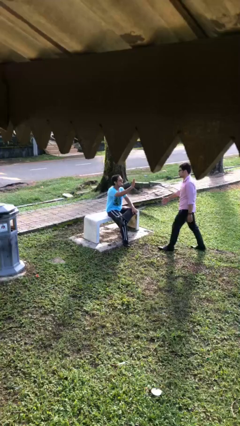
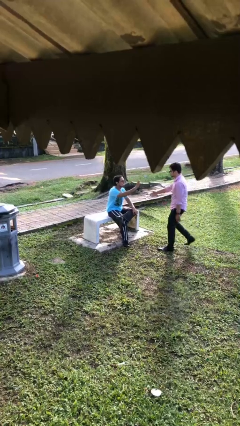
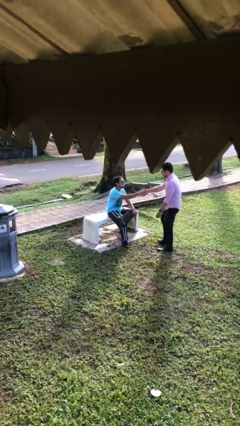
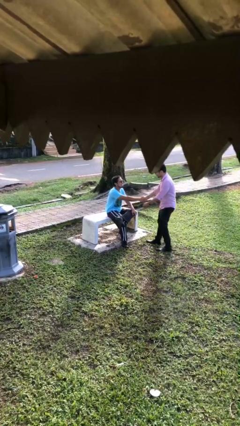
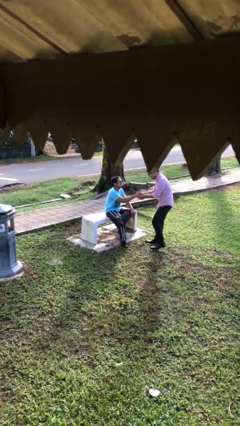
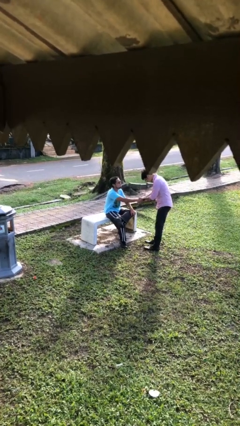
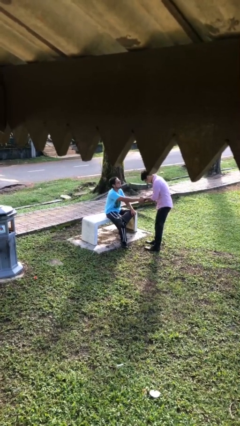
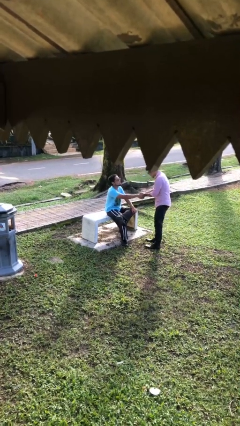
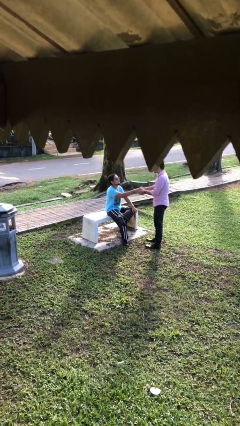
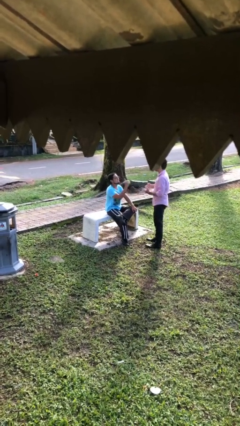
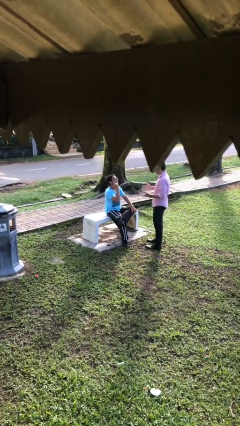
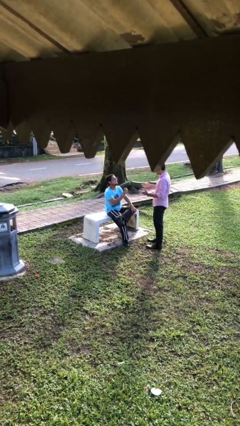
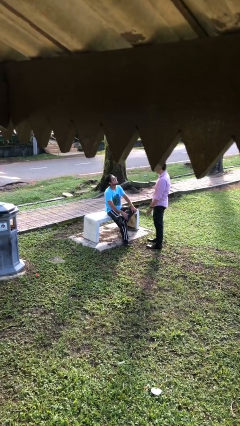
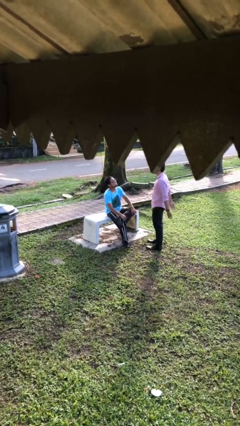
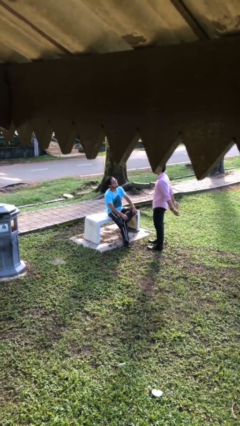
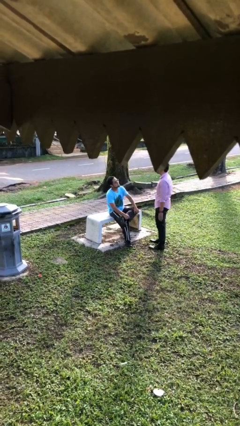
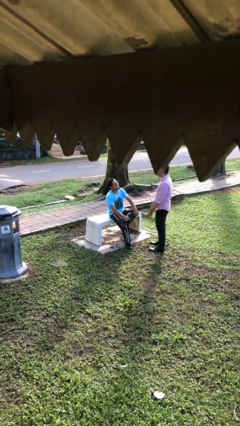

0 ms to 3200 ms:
person shakes hand

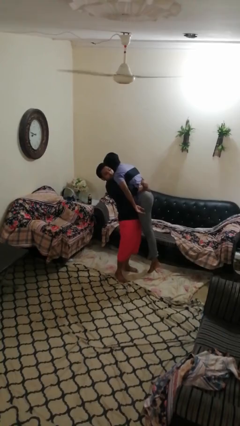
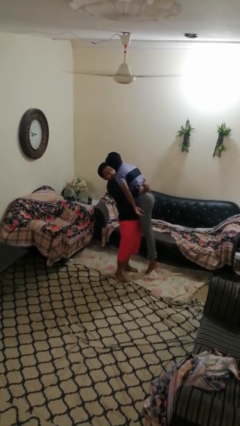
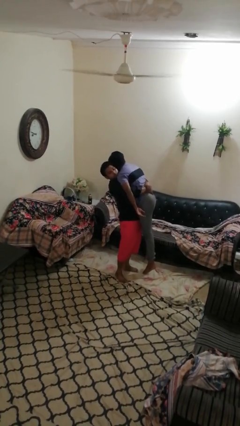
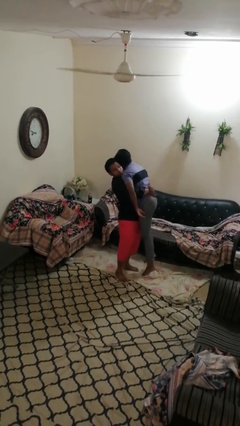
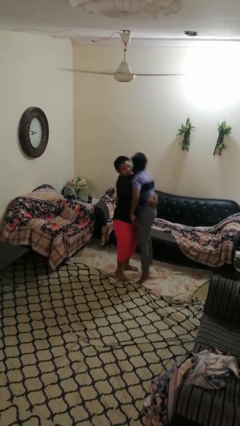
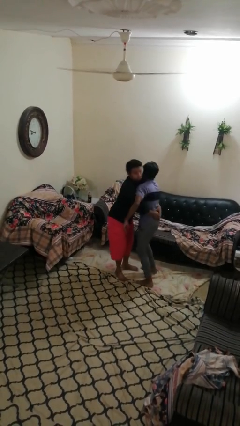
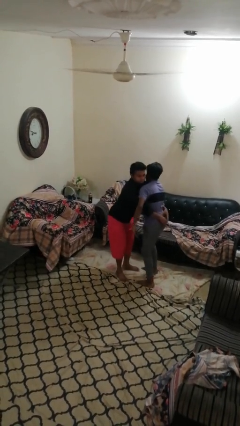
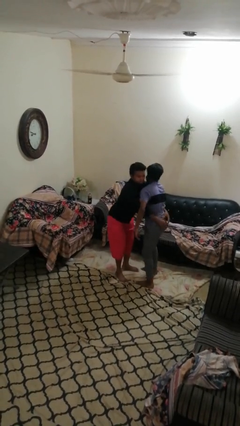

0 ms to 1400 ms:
person puts down person

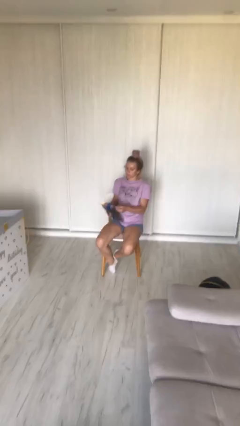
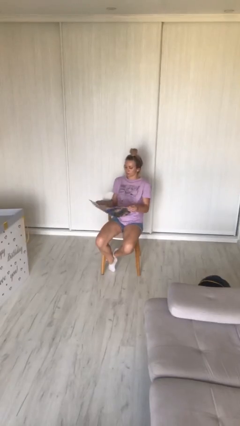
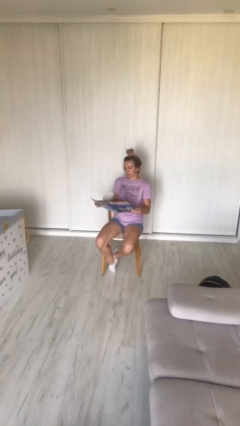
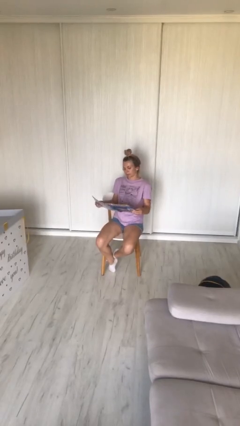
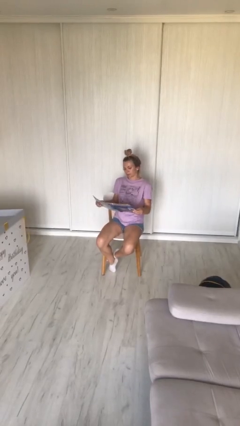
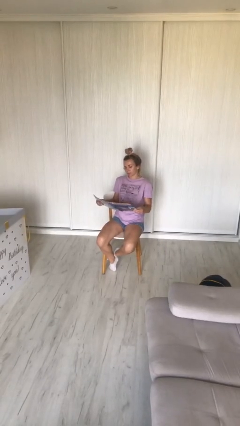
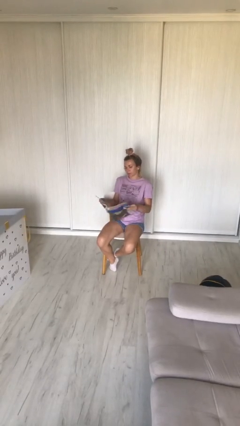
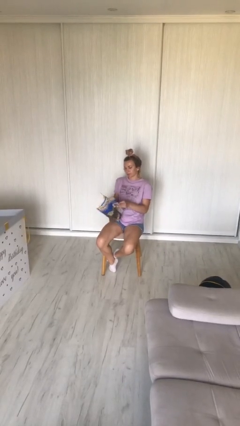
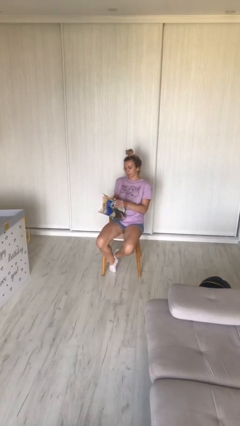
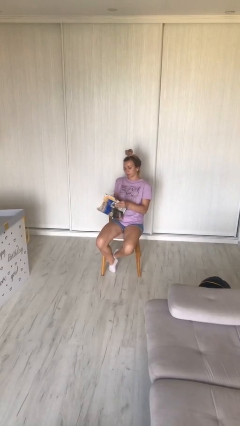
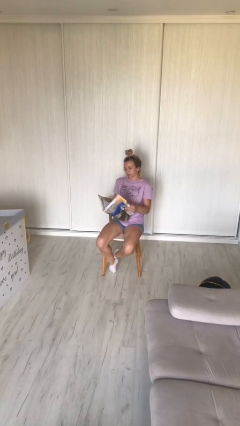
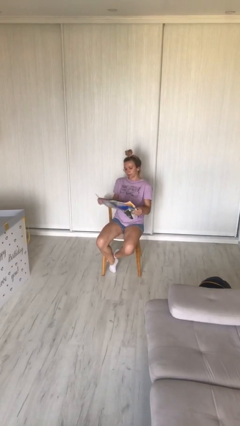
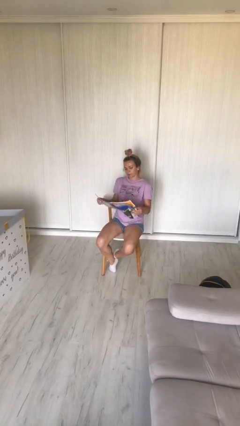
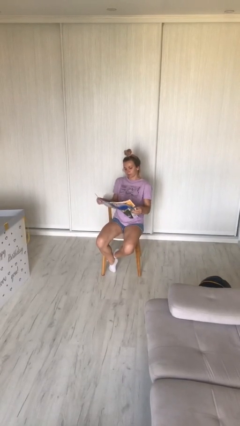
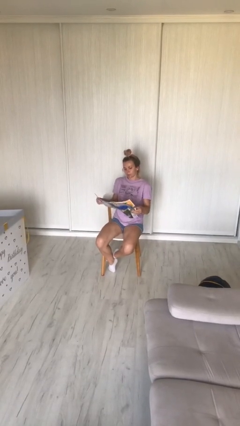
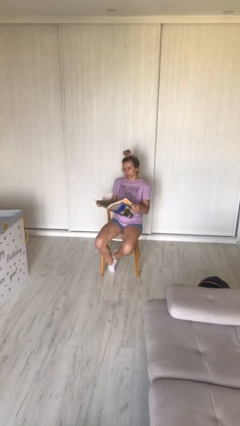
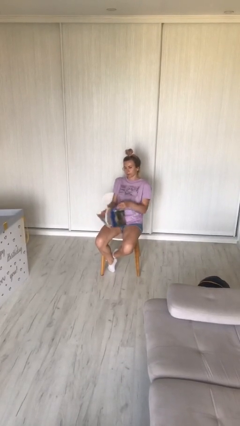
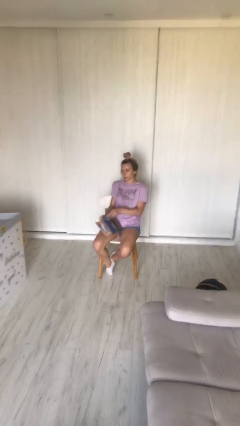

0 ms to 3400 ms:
person reads magazine

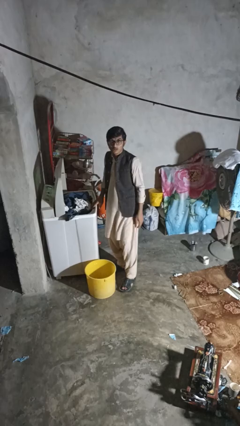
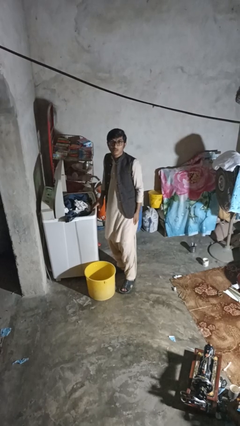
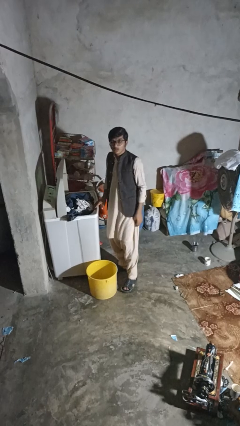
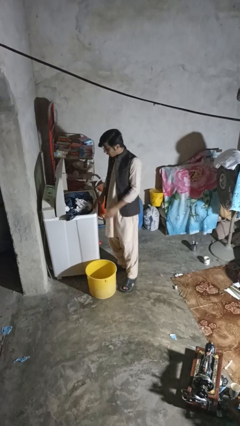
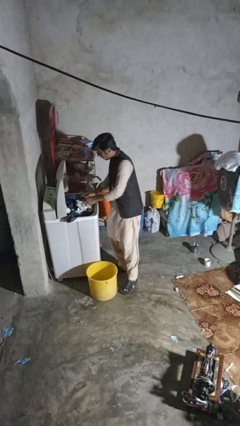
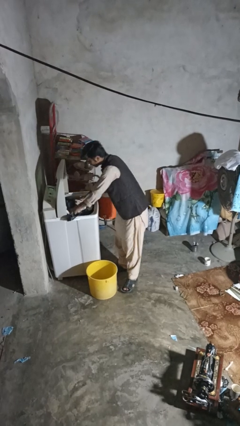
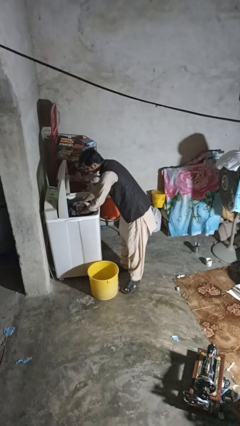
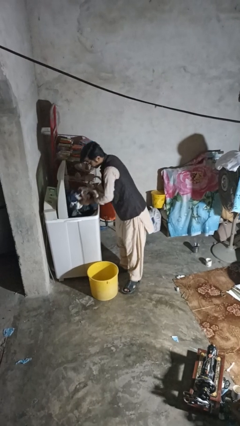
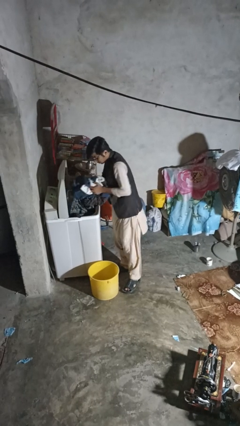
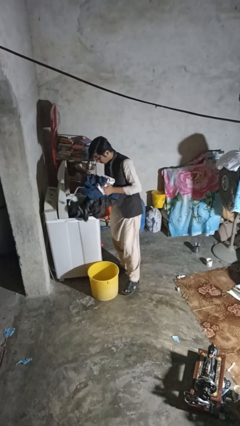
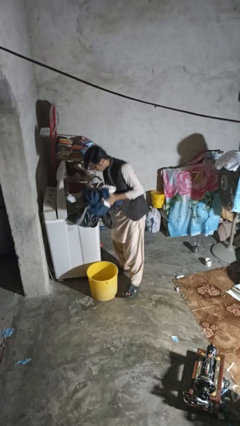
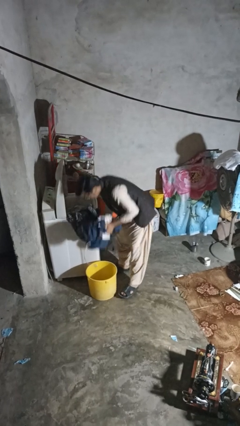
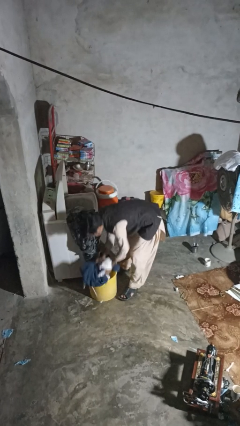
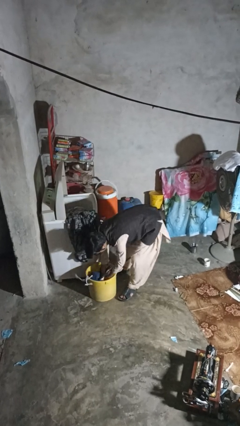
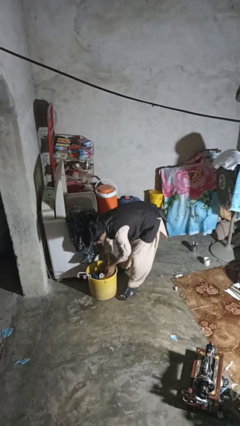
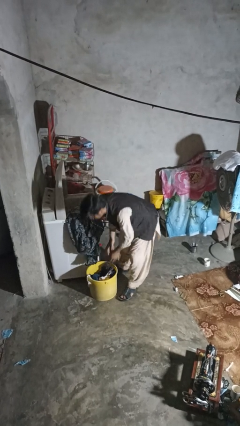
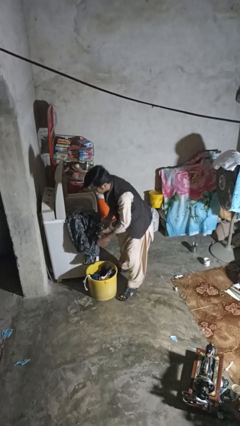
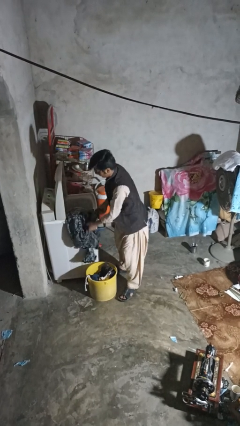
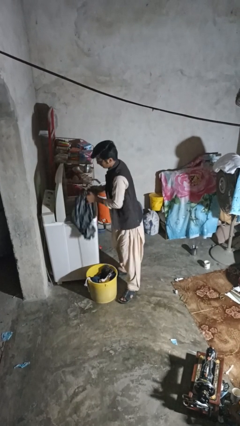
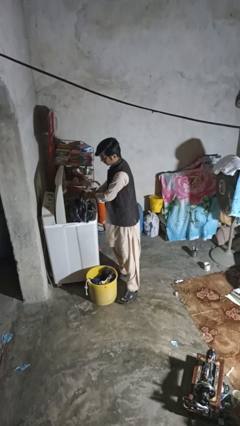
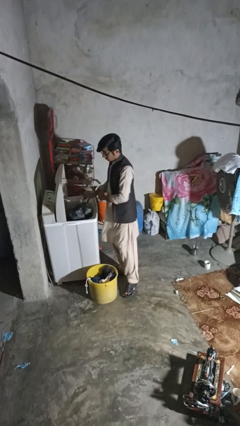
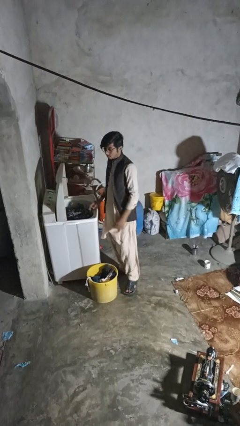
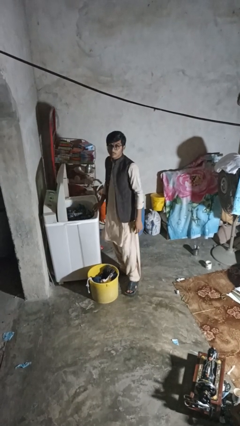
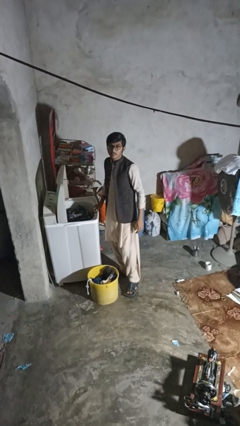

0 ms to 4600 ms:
person unloads dryer

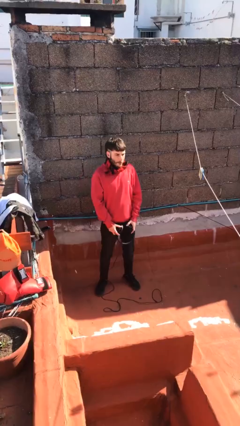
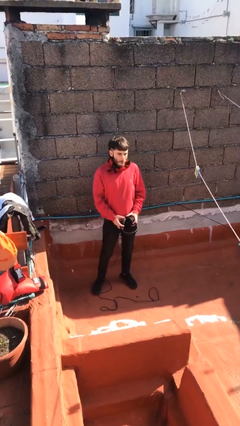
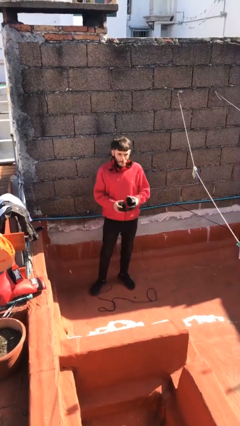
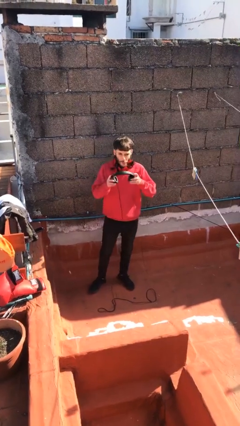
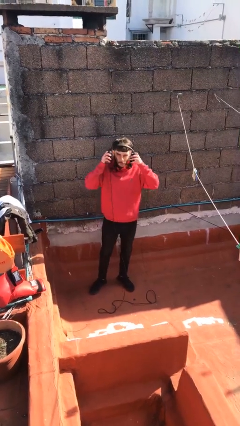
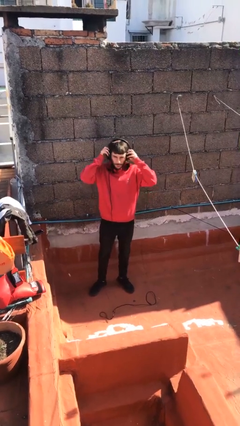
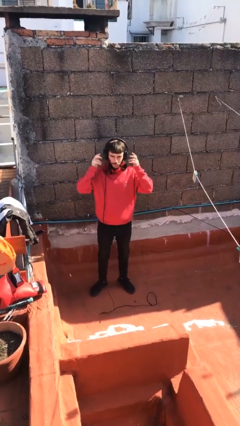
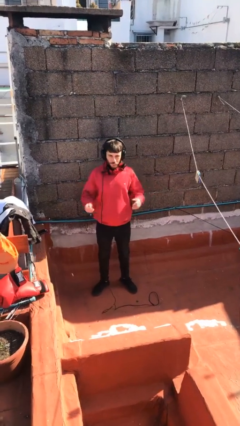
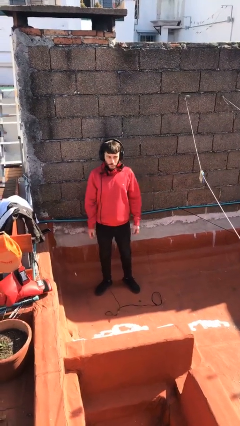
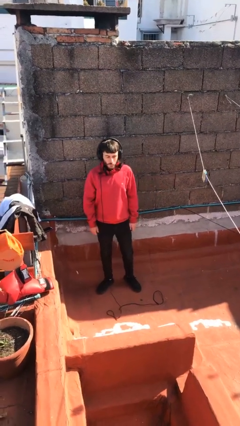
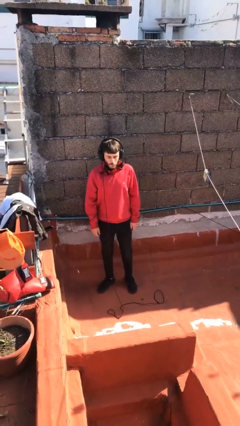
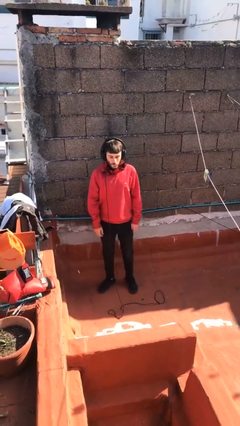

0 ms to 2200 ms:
person puts on headphones

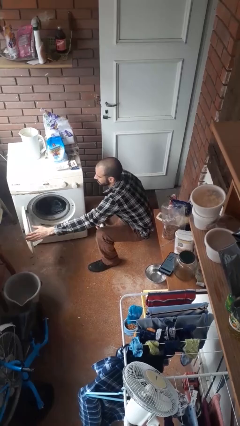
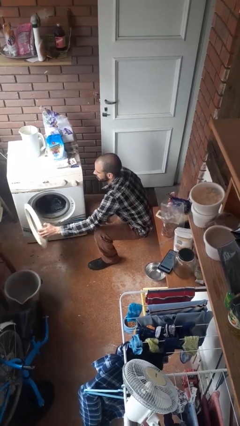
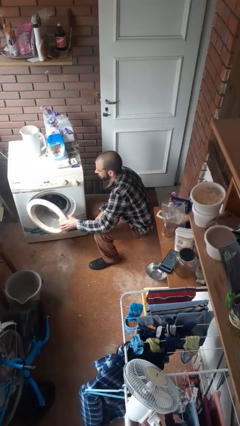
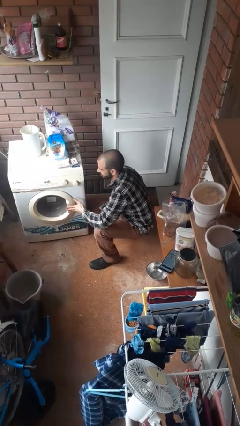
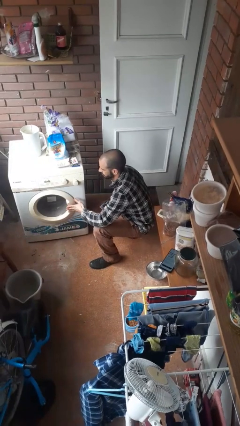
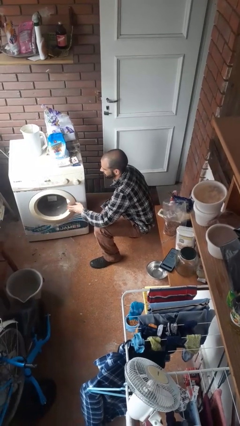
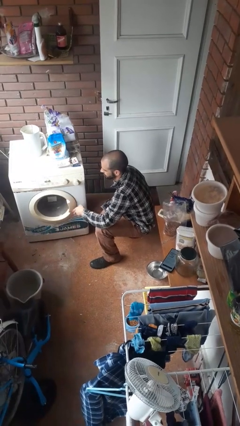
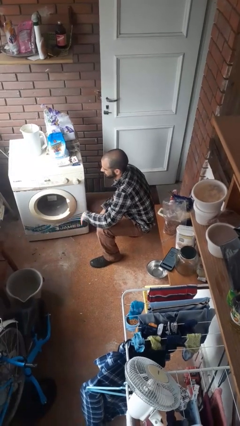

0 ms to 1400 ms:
person closes clothes washer

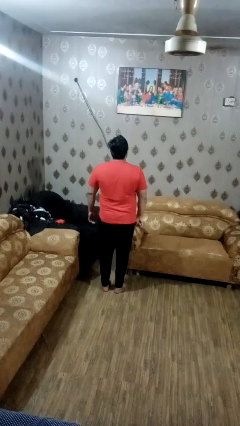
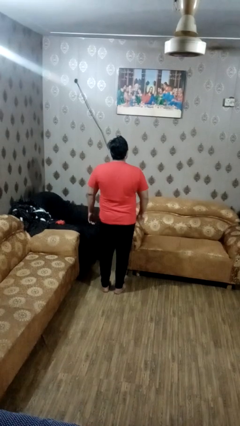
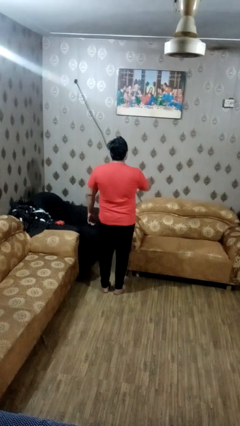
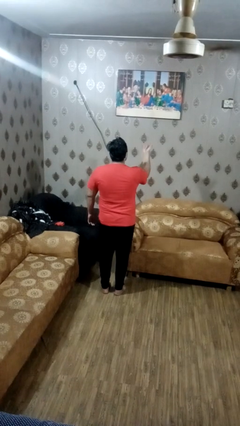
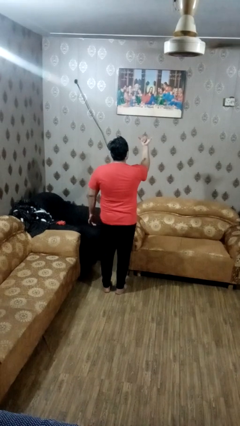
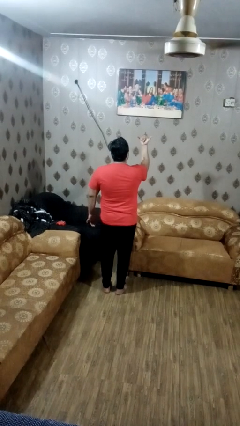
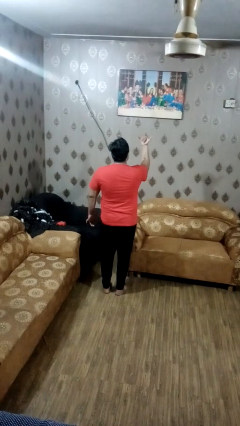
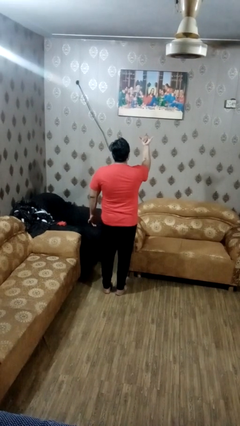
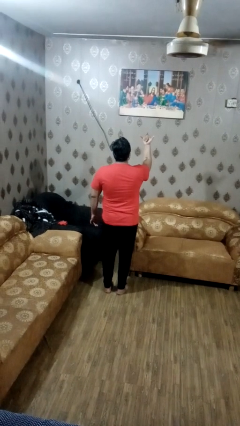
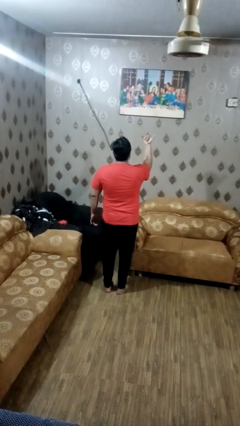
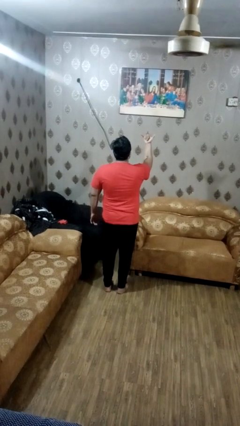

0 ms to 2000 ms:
person gestures hang loose
